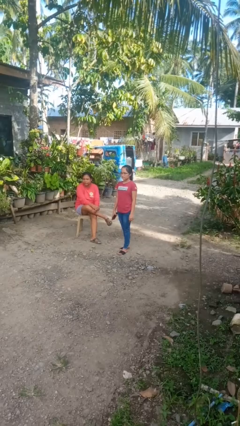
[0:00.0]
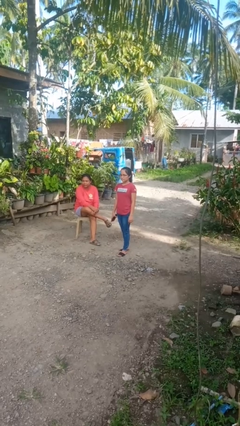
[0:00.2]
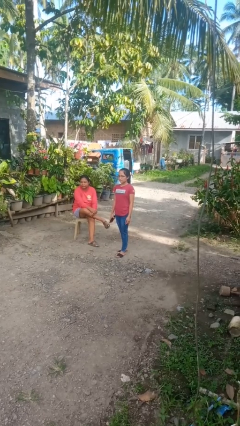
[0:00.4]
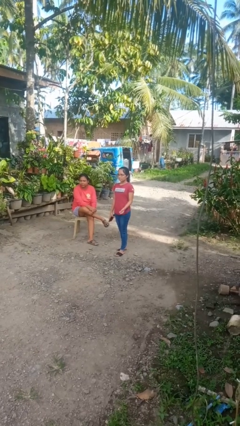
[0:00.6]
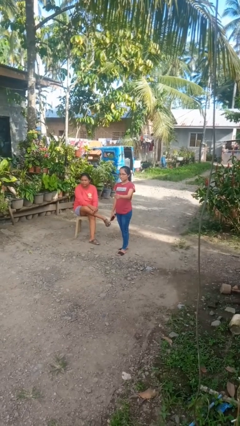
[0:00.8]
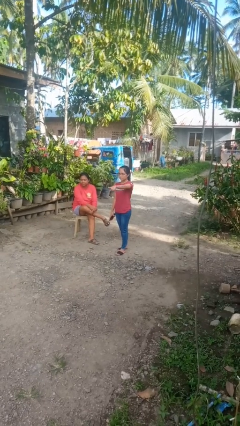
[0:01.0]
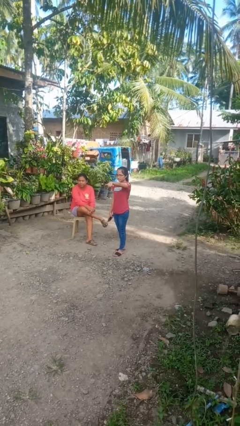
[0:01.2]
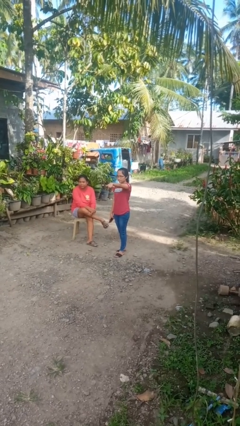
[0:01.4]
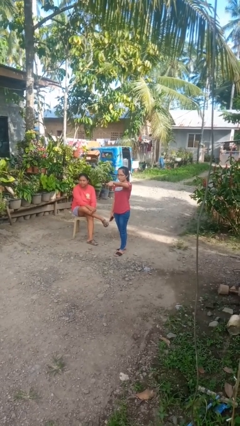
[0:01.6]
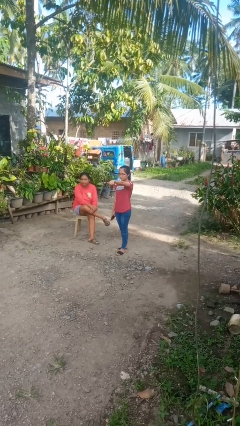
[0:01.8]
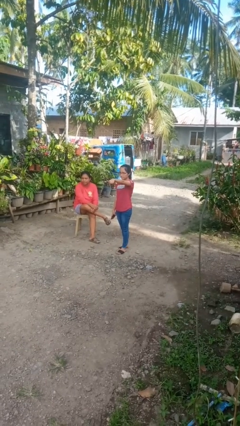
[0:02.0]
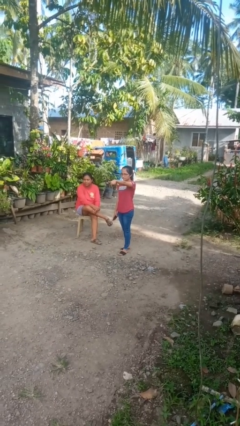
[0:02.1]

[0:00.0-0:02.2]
person points at person

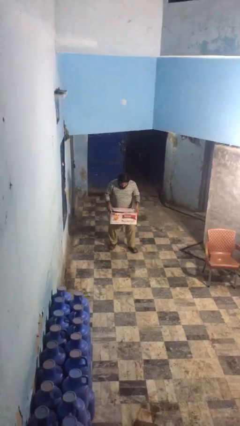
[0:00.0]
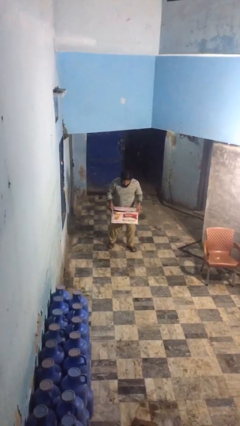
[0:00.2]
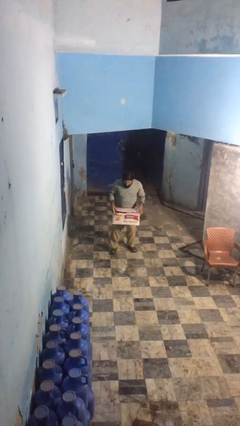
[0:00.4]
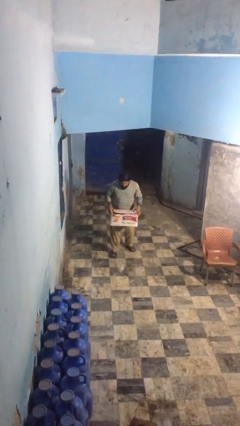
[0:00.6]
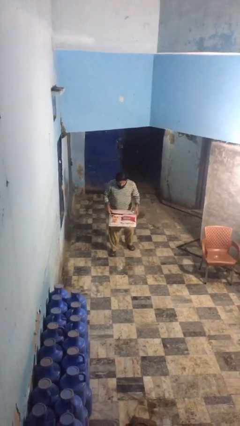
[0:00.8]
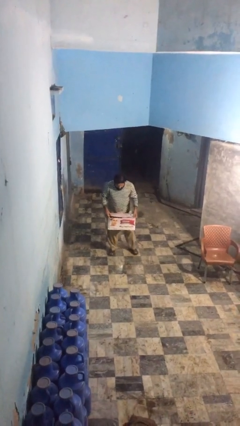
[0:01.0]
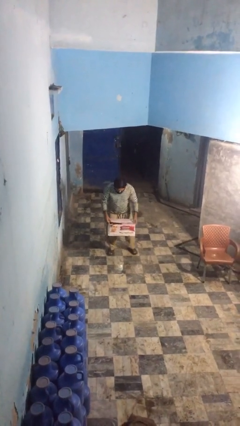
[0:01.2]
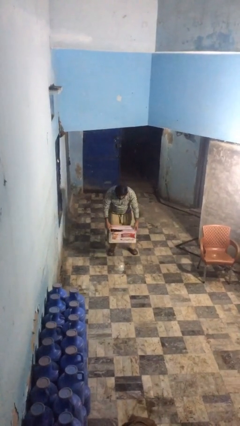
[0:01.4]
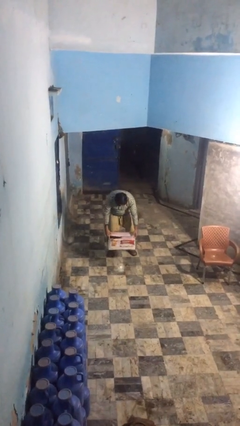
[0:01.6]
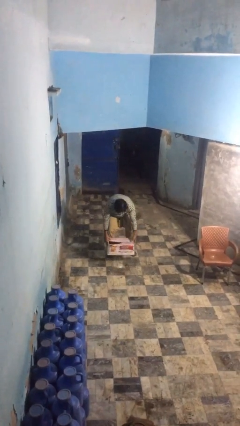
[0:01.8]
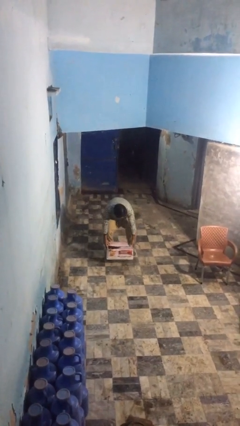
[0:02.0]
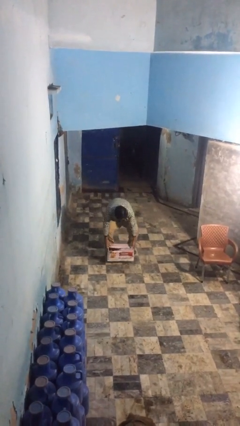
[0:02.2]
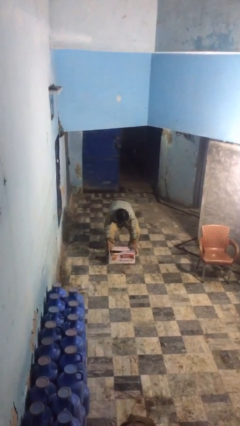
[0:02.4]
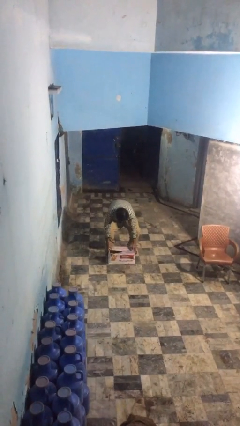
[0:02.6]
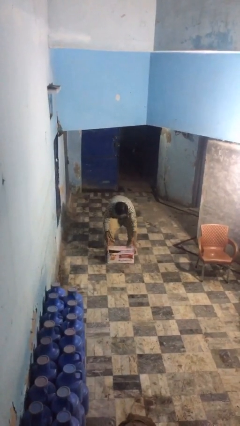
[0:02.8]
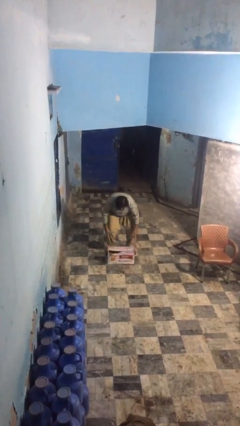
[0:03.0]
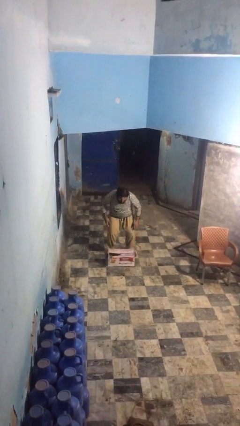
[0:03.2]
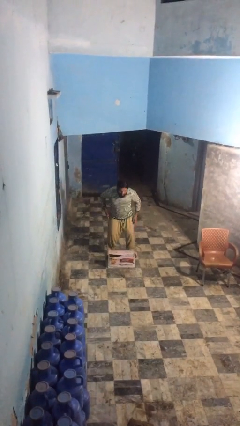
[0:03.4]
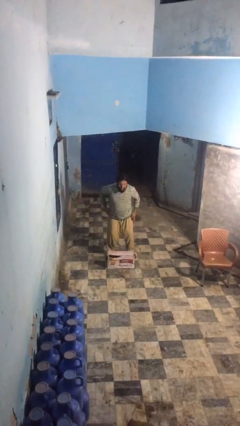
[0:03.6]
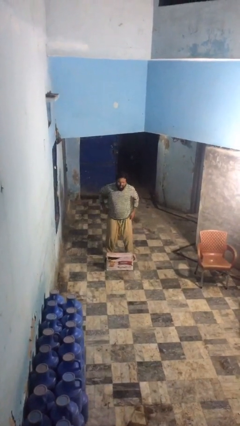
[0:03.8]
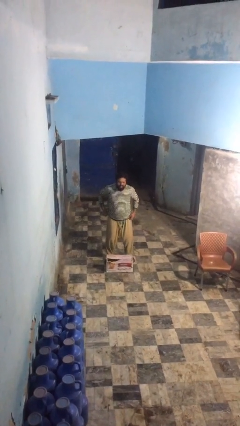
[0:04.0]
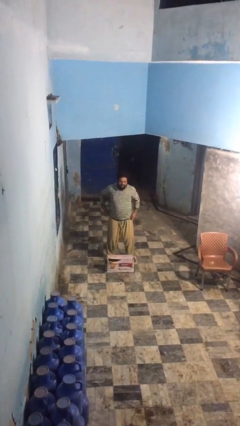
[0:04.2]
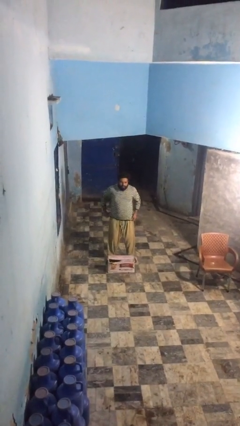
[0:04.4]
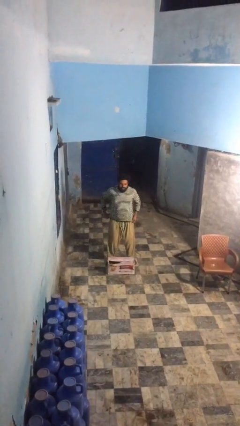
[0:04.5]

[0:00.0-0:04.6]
person puts down object on floor

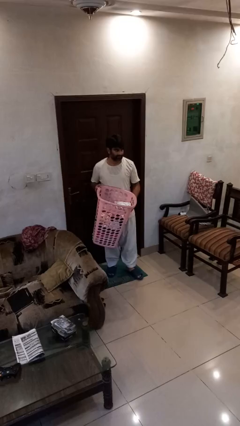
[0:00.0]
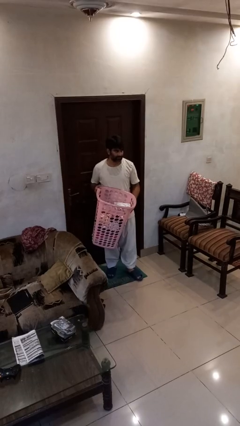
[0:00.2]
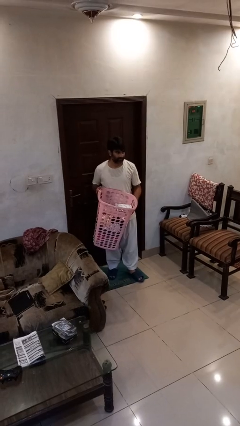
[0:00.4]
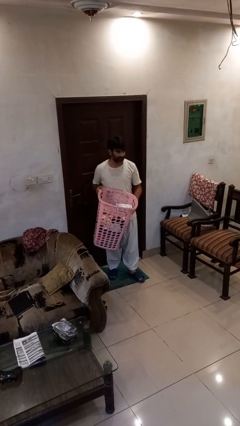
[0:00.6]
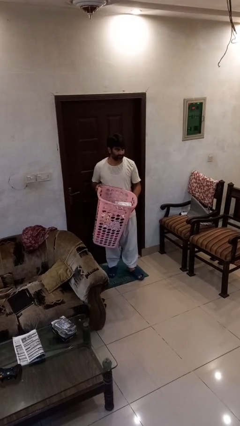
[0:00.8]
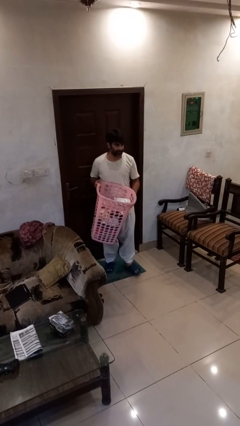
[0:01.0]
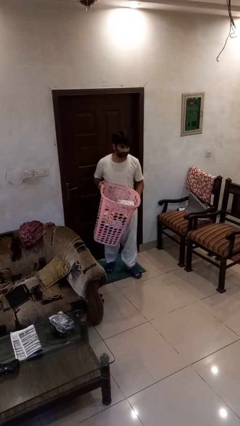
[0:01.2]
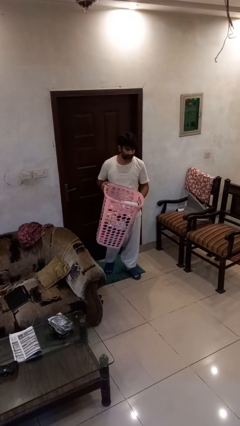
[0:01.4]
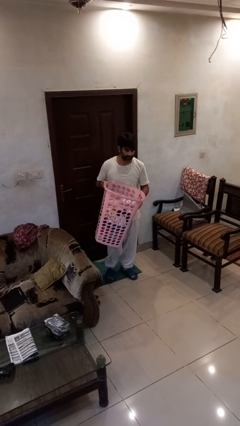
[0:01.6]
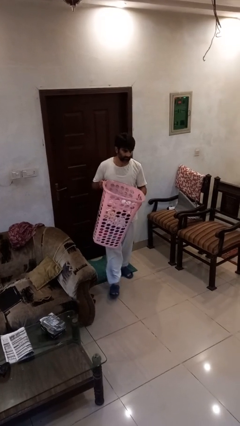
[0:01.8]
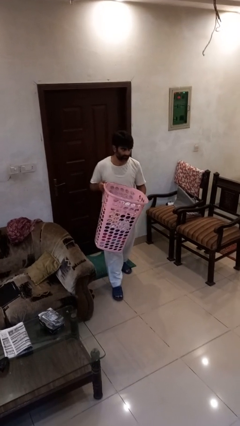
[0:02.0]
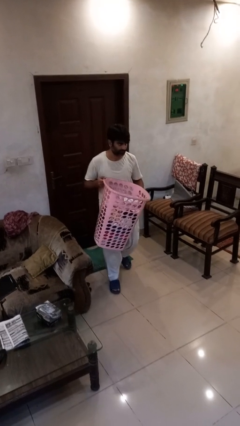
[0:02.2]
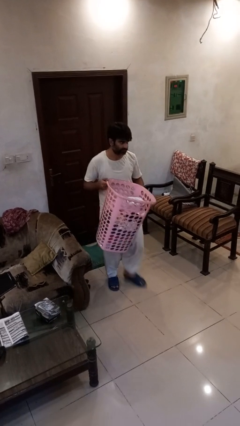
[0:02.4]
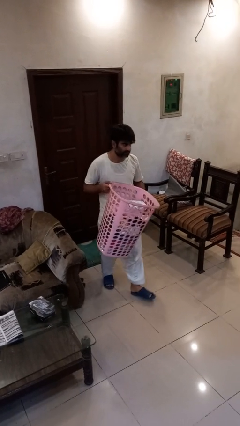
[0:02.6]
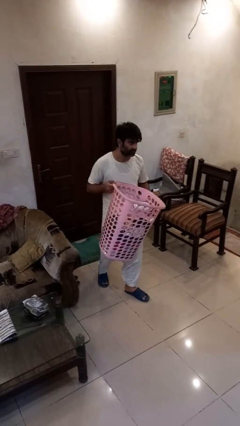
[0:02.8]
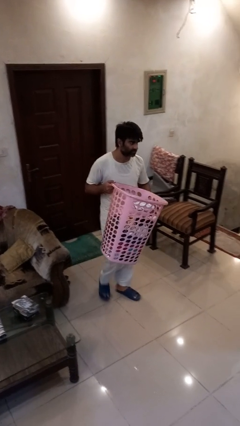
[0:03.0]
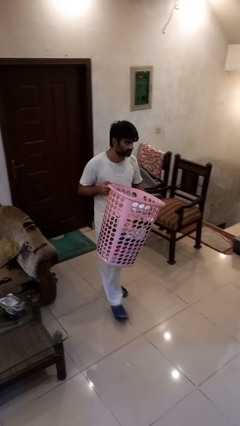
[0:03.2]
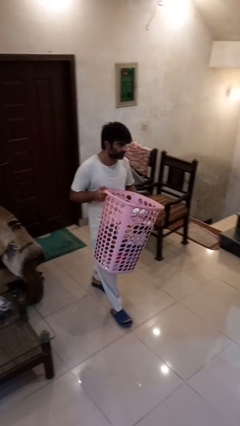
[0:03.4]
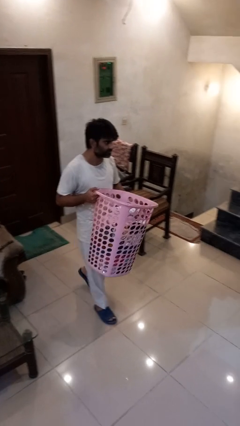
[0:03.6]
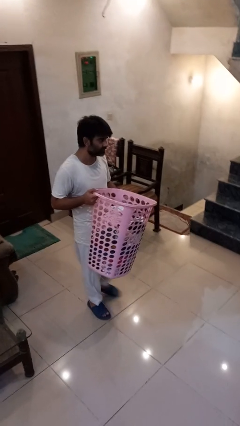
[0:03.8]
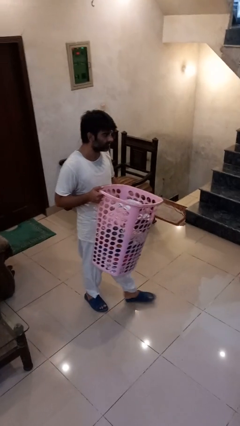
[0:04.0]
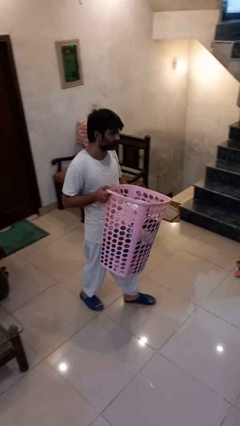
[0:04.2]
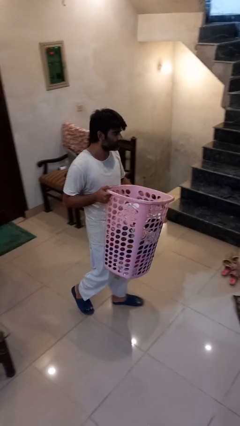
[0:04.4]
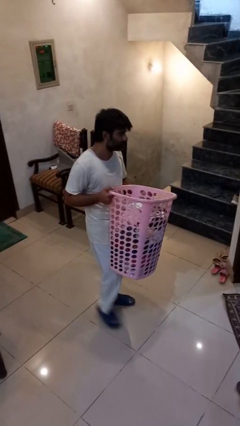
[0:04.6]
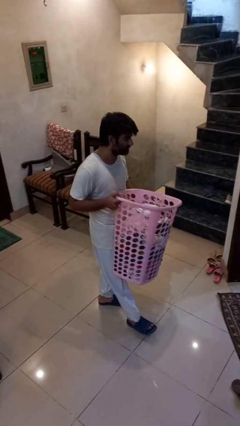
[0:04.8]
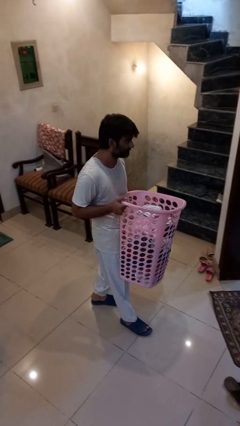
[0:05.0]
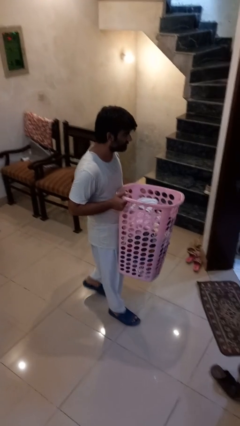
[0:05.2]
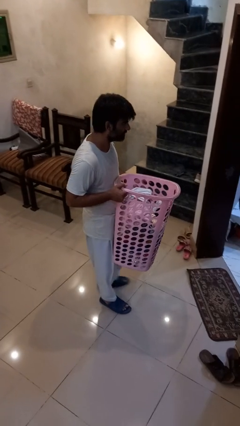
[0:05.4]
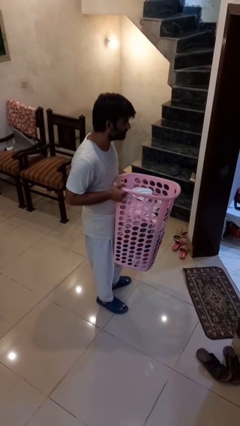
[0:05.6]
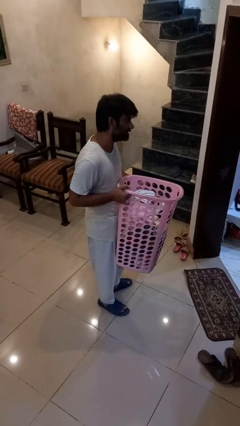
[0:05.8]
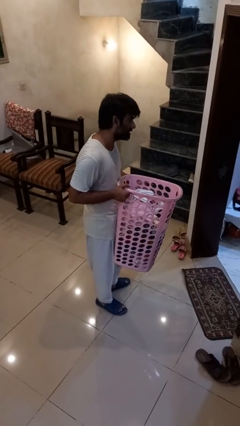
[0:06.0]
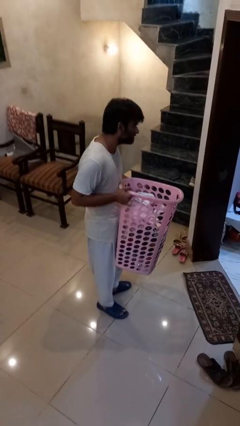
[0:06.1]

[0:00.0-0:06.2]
person carries laundry basket

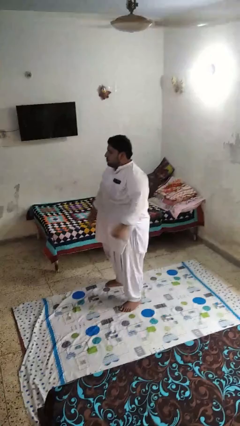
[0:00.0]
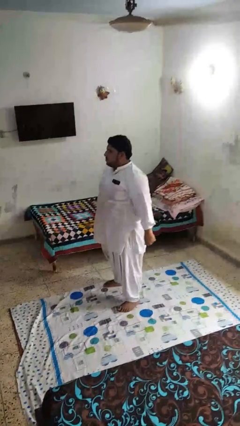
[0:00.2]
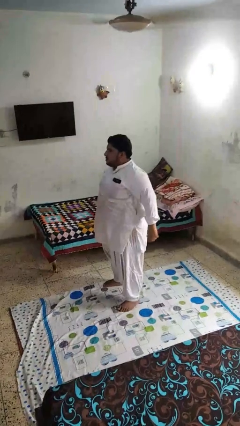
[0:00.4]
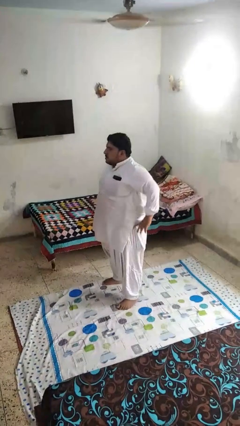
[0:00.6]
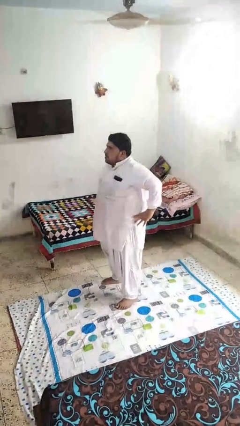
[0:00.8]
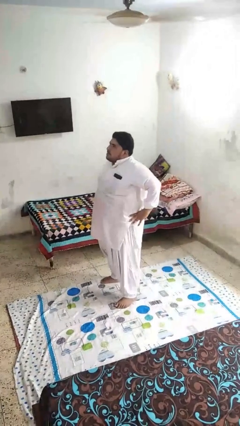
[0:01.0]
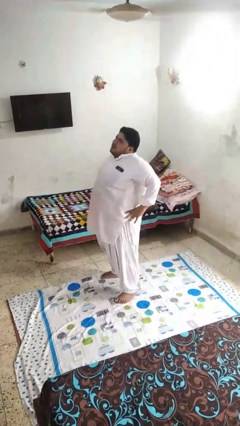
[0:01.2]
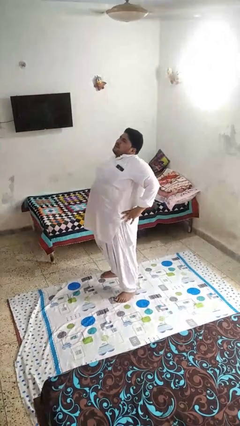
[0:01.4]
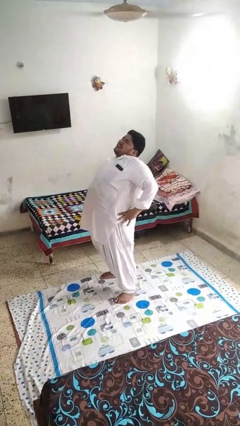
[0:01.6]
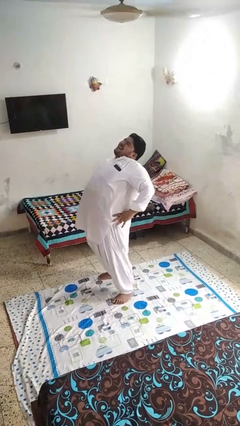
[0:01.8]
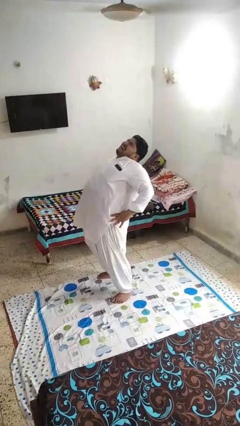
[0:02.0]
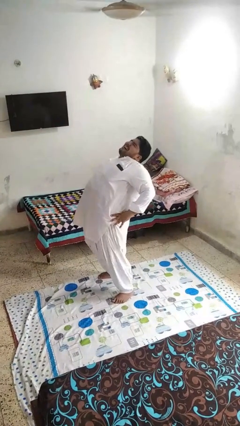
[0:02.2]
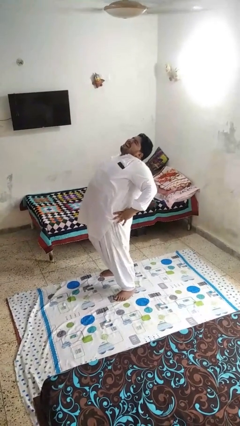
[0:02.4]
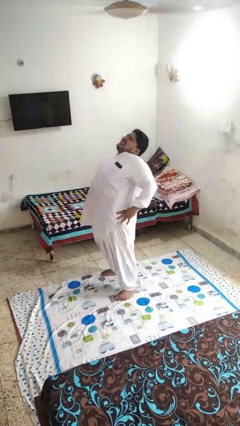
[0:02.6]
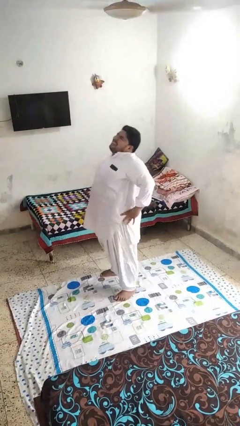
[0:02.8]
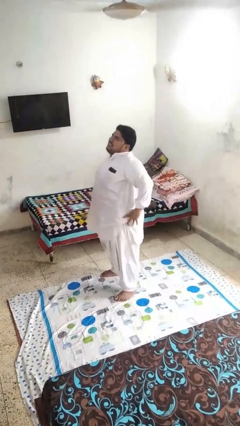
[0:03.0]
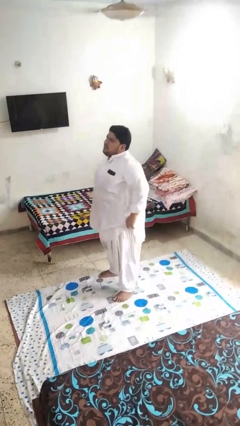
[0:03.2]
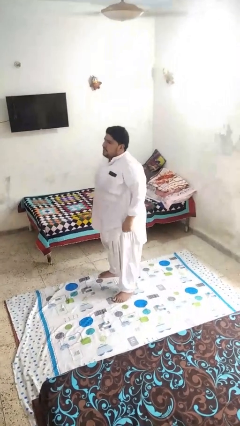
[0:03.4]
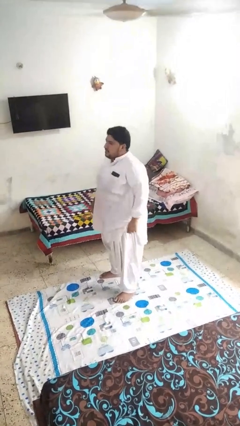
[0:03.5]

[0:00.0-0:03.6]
person stretches back

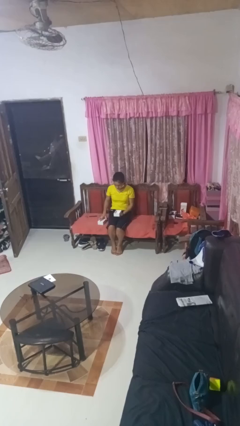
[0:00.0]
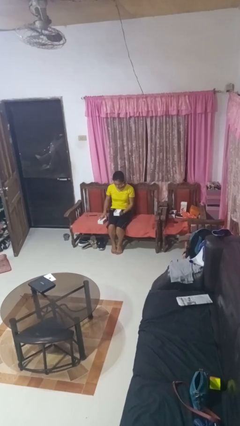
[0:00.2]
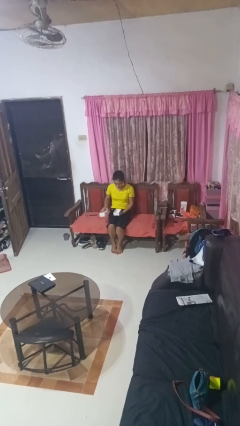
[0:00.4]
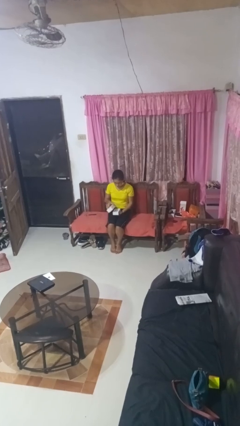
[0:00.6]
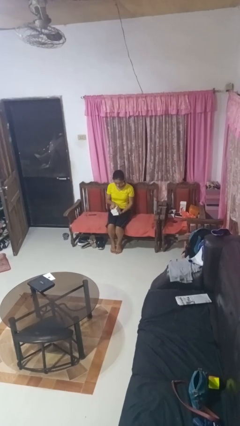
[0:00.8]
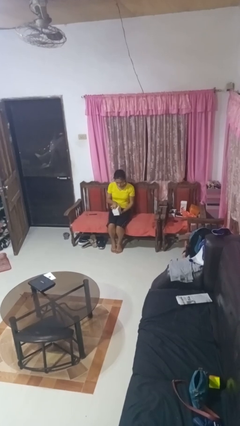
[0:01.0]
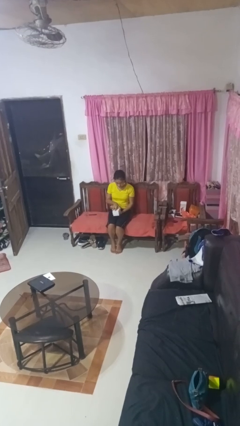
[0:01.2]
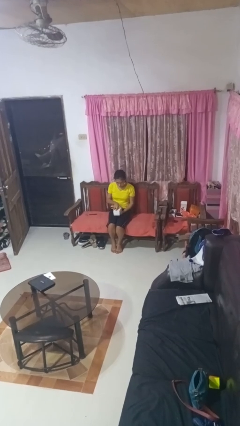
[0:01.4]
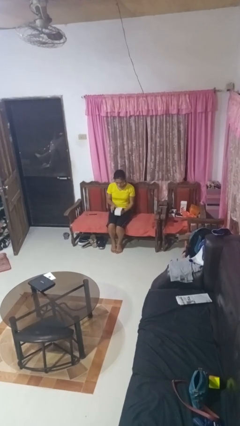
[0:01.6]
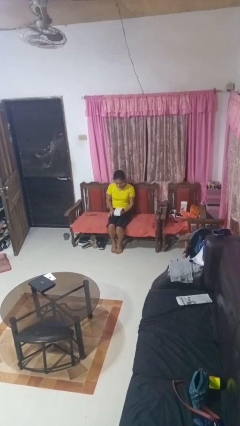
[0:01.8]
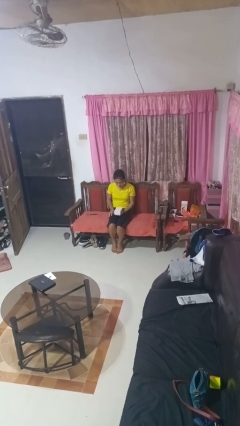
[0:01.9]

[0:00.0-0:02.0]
person closes jewelry box
